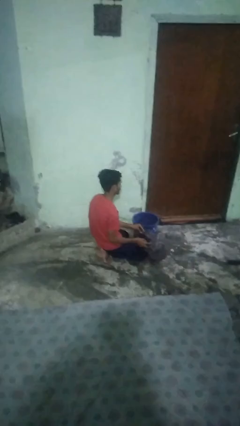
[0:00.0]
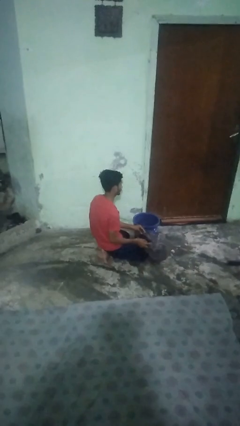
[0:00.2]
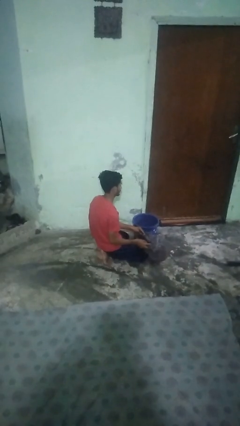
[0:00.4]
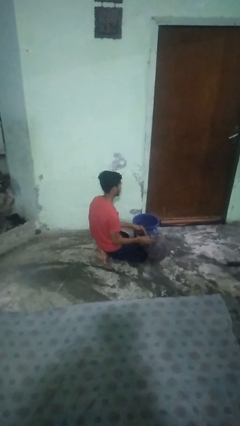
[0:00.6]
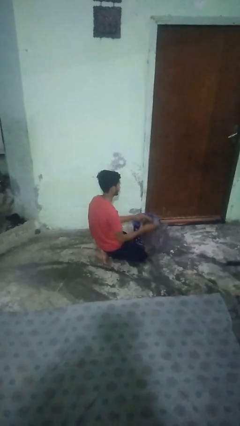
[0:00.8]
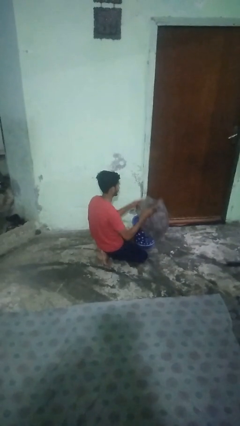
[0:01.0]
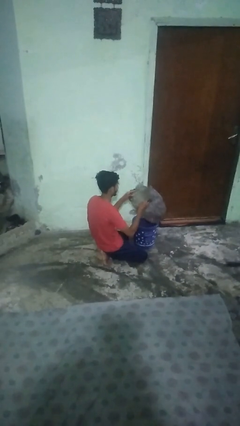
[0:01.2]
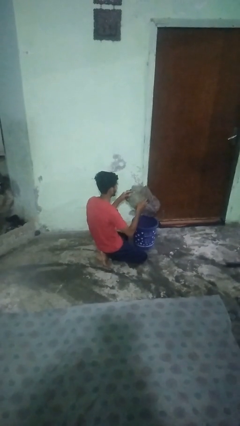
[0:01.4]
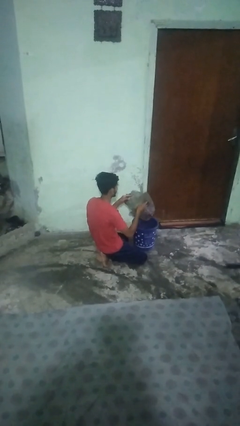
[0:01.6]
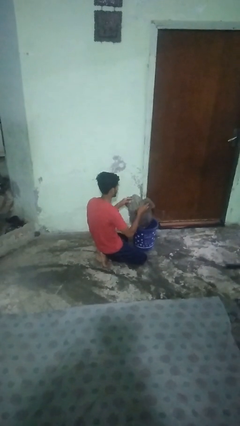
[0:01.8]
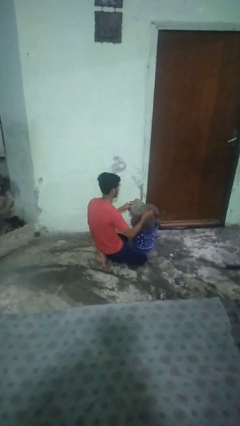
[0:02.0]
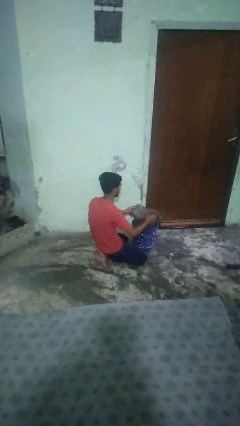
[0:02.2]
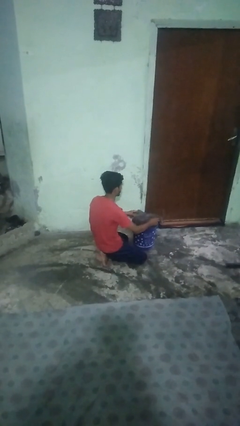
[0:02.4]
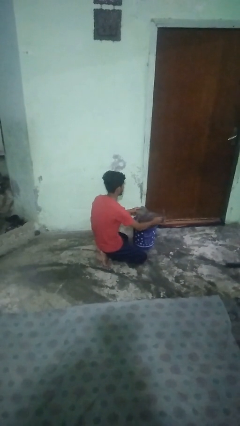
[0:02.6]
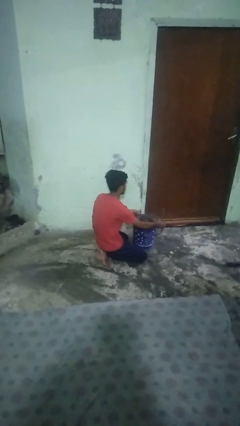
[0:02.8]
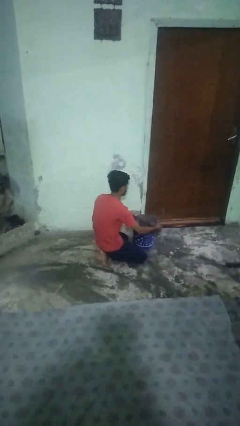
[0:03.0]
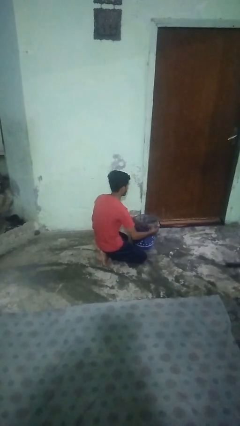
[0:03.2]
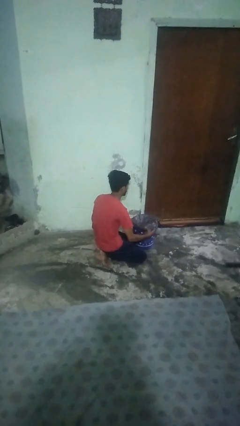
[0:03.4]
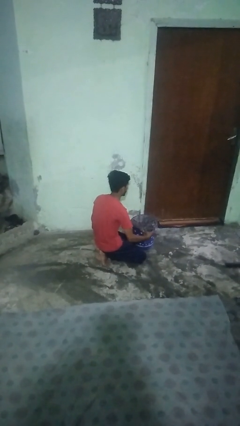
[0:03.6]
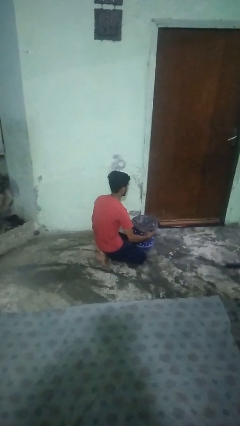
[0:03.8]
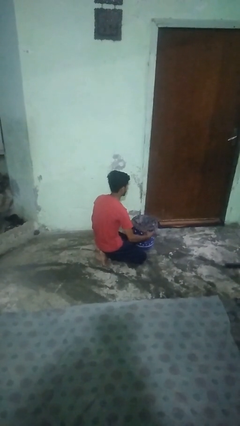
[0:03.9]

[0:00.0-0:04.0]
person inserts trashbag into trashcan

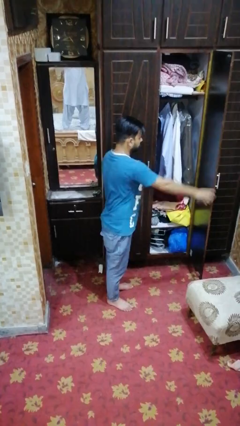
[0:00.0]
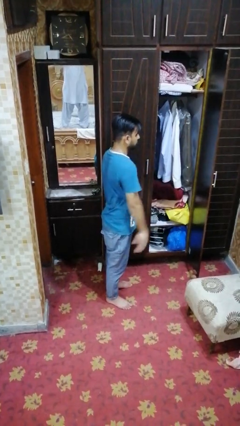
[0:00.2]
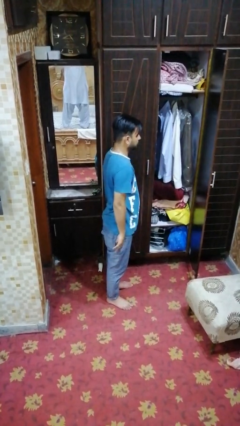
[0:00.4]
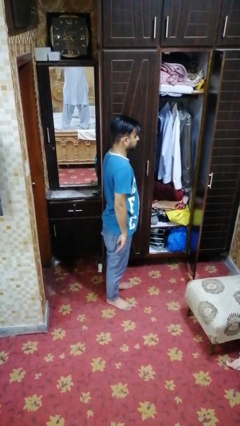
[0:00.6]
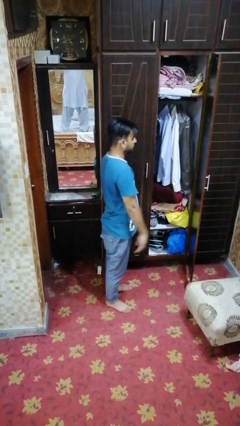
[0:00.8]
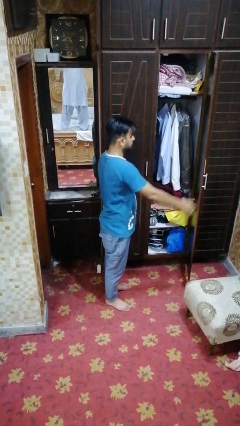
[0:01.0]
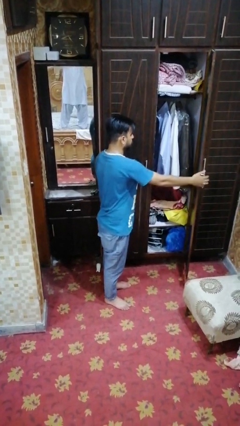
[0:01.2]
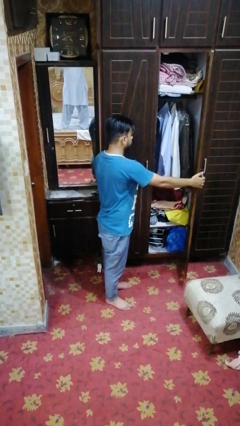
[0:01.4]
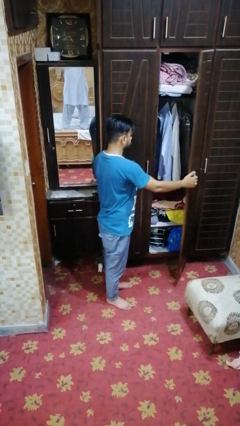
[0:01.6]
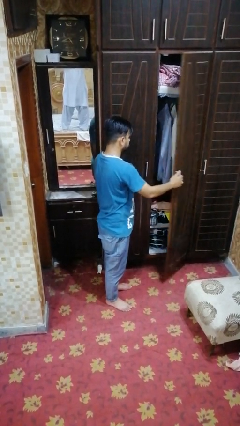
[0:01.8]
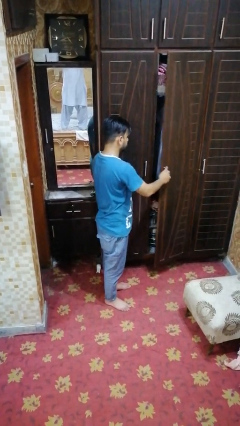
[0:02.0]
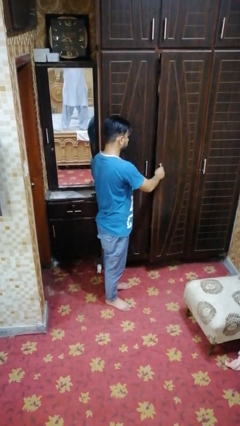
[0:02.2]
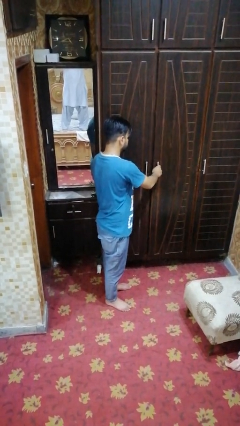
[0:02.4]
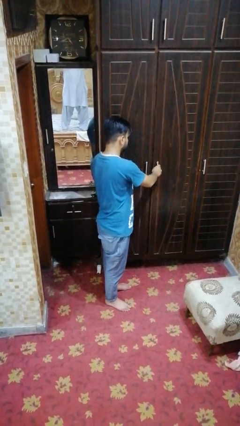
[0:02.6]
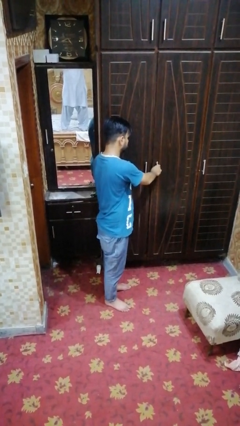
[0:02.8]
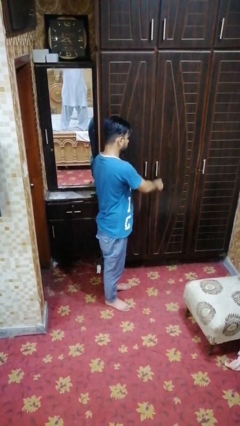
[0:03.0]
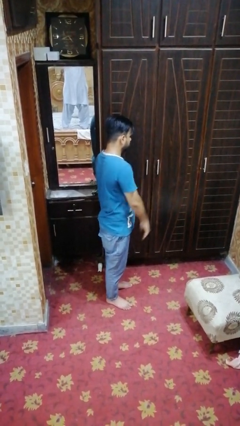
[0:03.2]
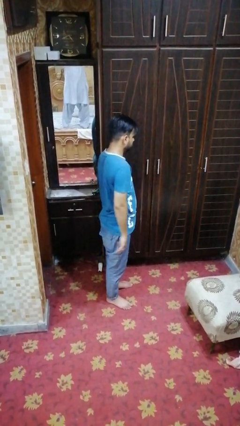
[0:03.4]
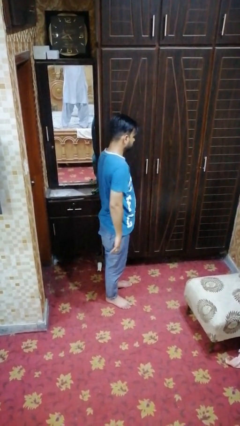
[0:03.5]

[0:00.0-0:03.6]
person closes closet door

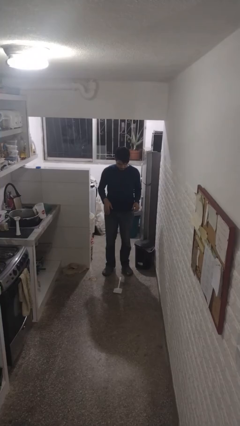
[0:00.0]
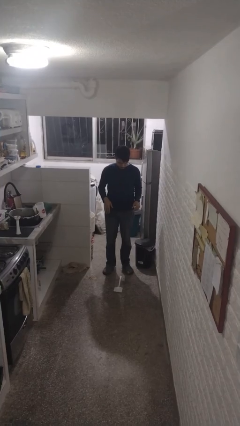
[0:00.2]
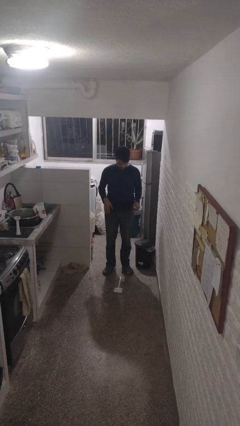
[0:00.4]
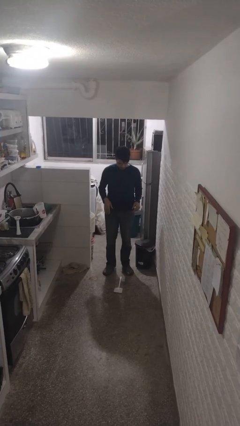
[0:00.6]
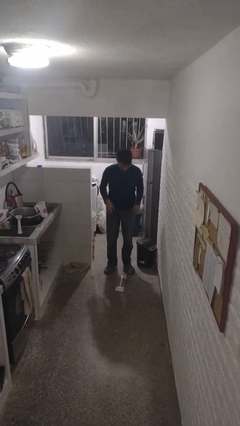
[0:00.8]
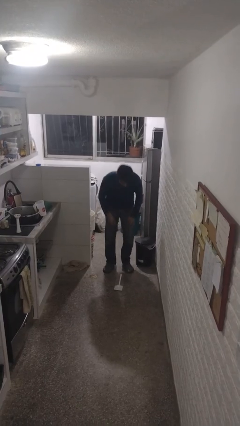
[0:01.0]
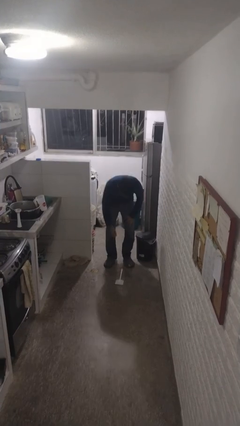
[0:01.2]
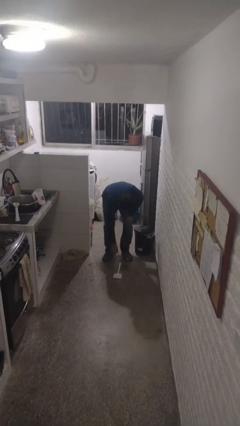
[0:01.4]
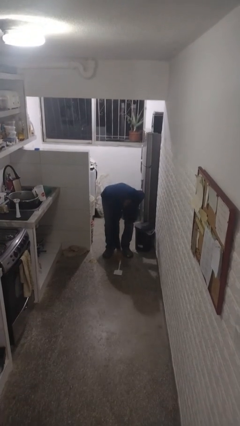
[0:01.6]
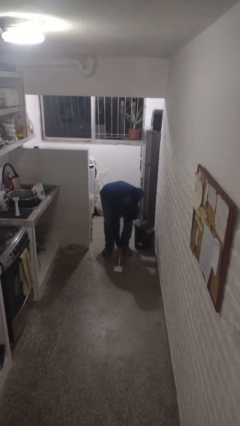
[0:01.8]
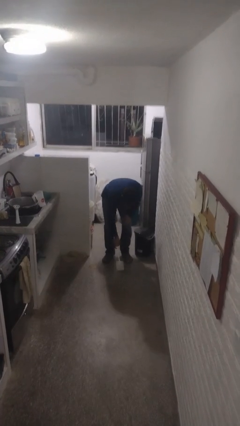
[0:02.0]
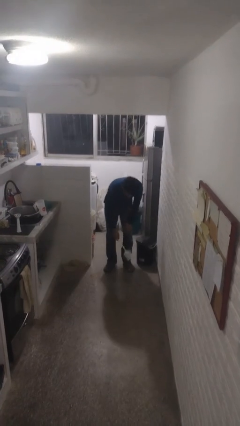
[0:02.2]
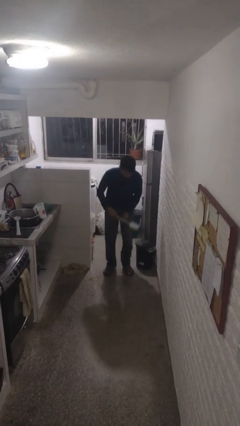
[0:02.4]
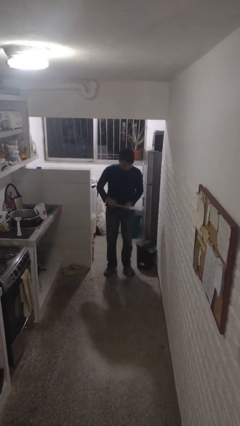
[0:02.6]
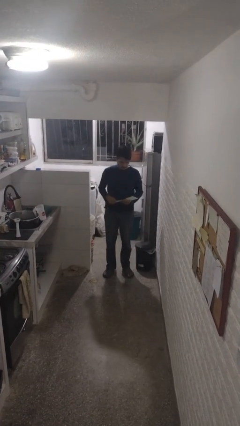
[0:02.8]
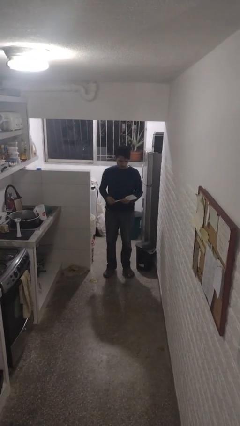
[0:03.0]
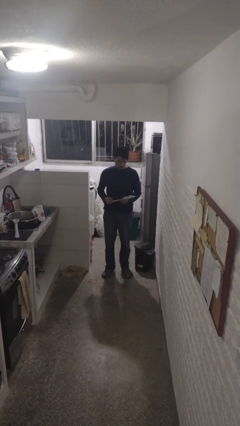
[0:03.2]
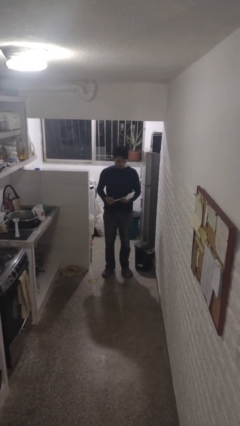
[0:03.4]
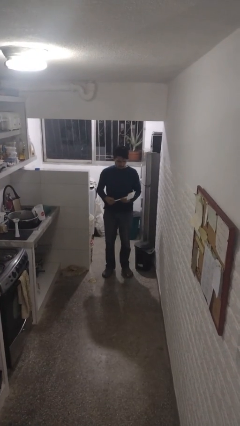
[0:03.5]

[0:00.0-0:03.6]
person picks up object from floor

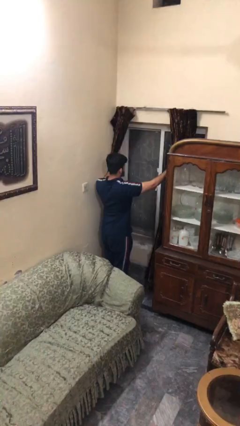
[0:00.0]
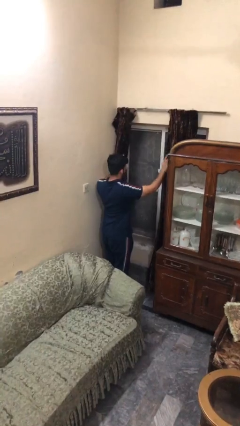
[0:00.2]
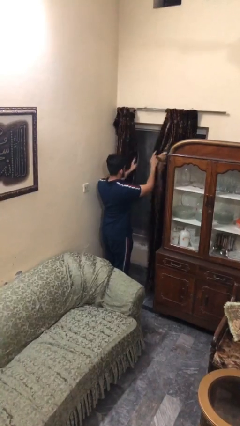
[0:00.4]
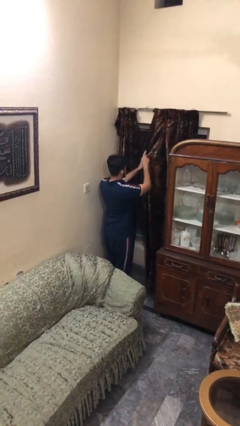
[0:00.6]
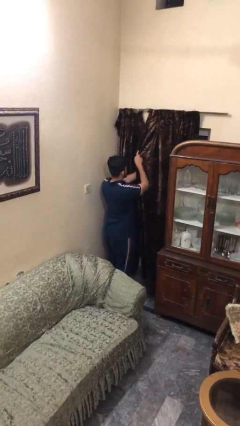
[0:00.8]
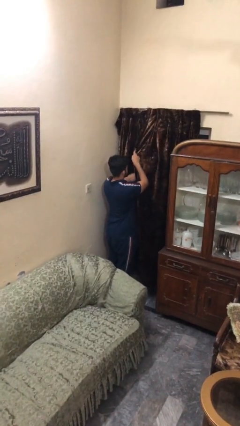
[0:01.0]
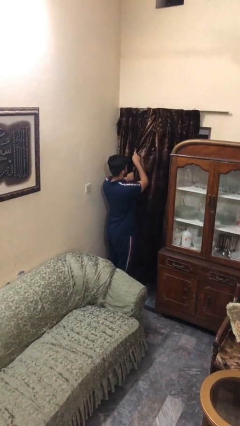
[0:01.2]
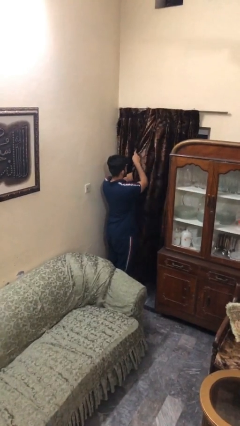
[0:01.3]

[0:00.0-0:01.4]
person closes curtains

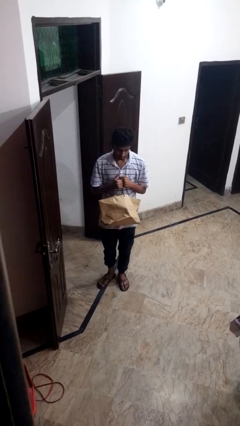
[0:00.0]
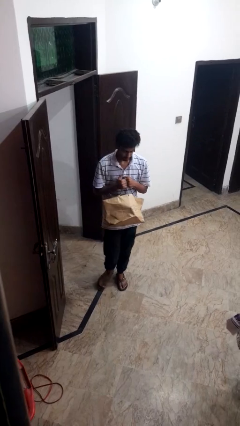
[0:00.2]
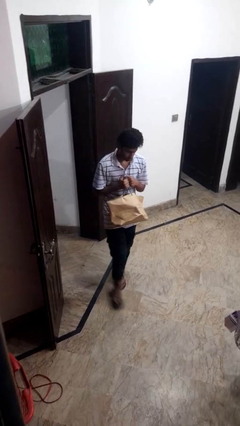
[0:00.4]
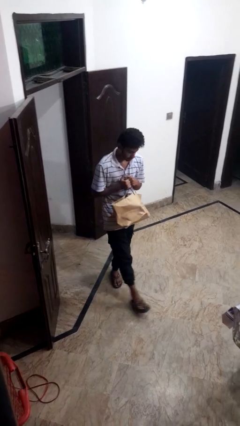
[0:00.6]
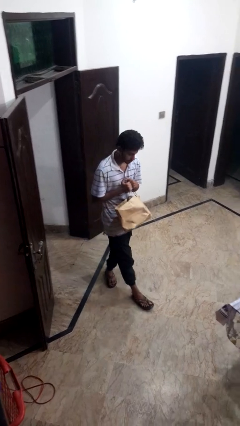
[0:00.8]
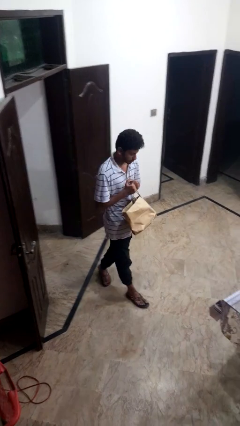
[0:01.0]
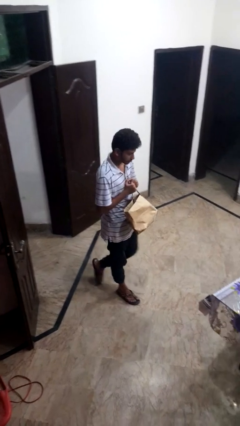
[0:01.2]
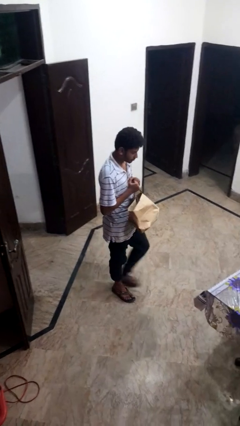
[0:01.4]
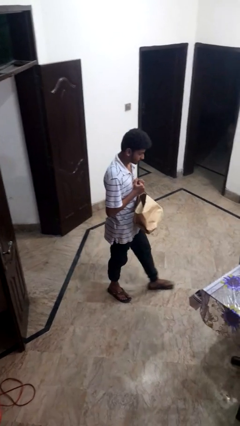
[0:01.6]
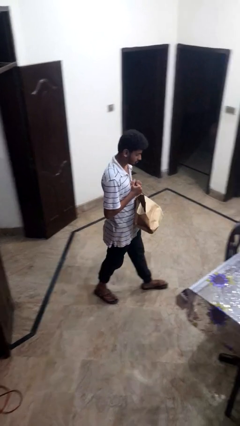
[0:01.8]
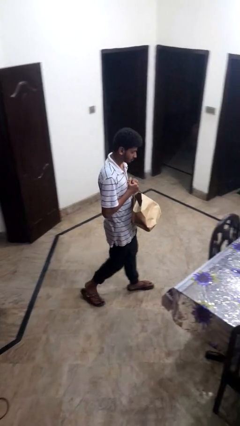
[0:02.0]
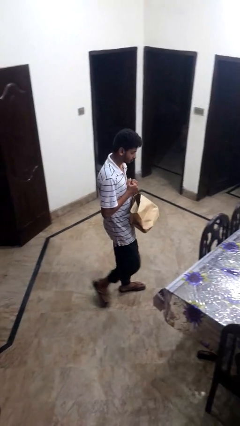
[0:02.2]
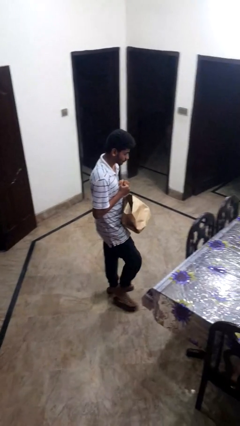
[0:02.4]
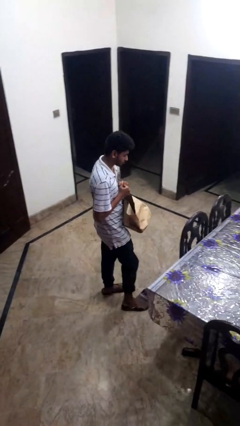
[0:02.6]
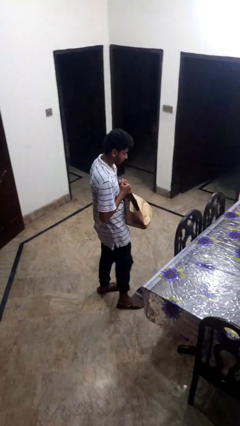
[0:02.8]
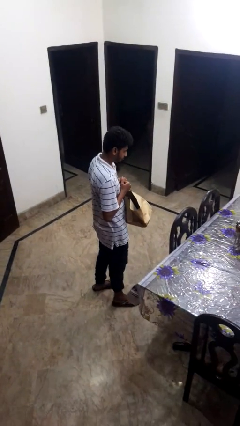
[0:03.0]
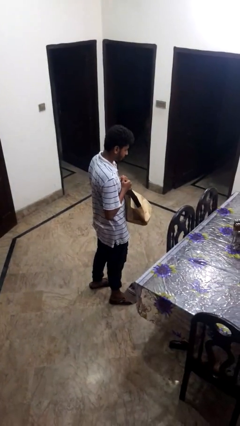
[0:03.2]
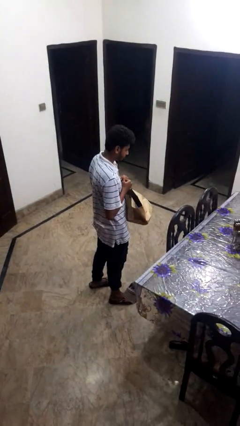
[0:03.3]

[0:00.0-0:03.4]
person carries groceries

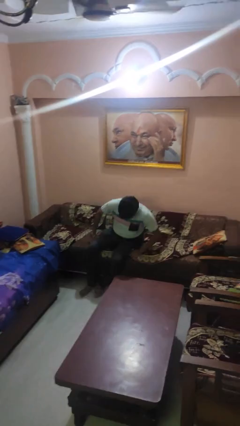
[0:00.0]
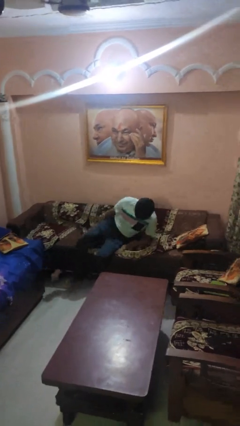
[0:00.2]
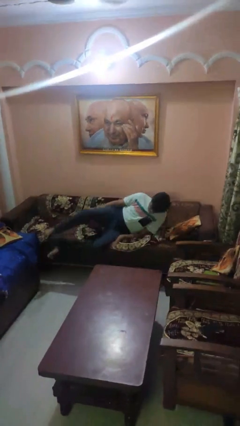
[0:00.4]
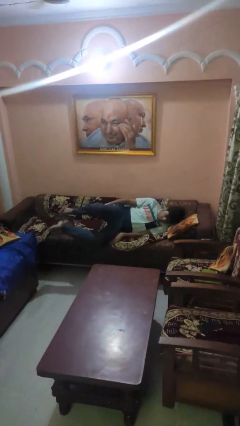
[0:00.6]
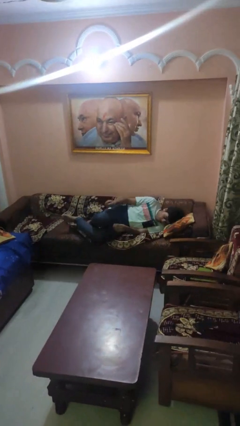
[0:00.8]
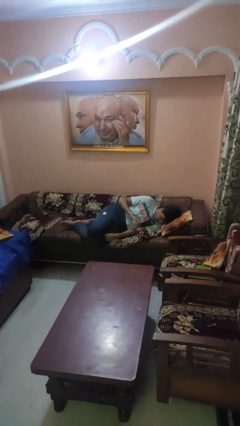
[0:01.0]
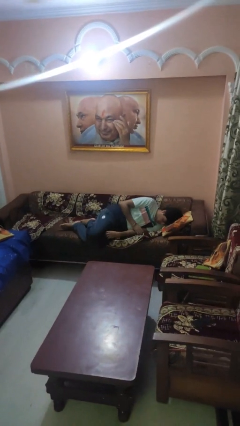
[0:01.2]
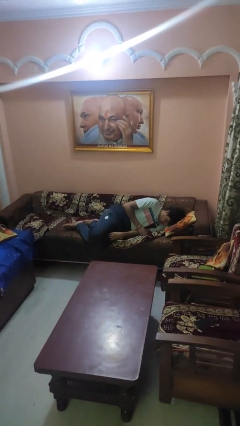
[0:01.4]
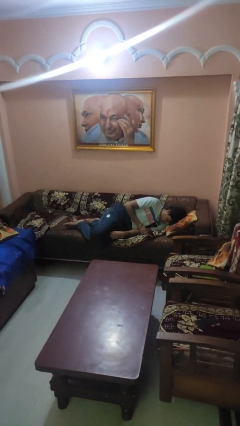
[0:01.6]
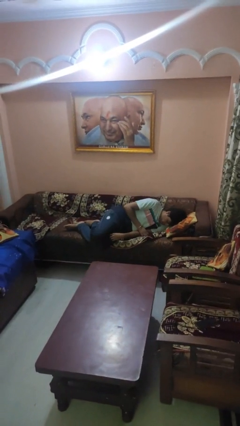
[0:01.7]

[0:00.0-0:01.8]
person lies down on couch
